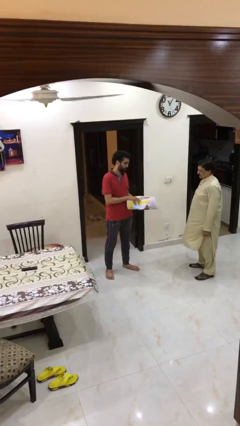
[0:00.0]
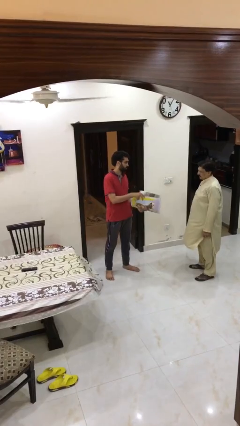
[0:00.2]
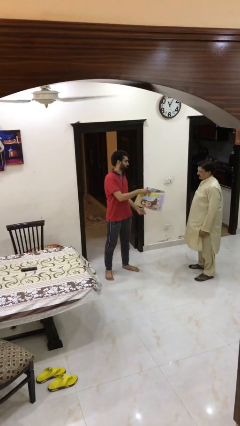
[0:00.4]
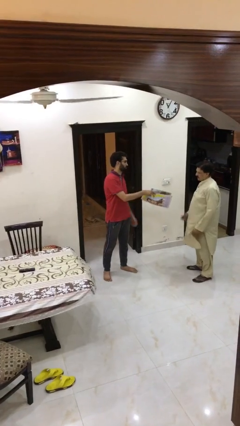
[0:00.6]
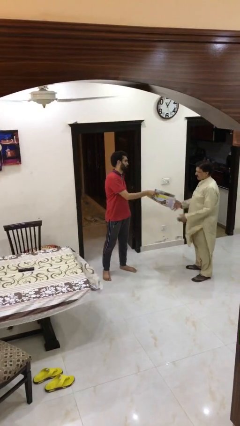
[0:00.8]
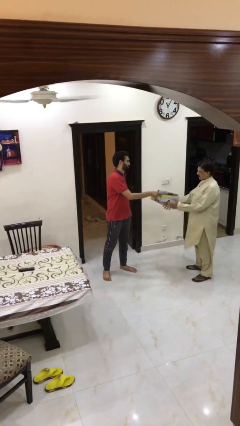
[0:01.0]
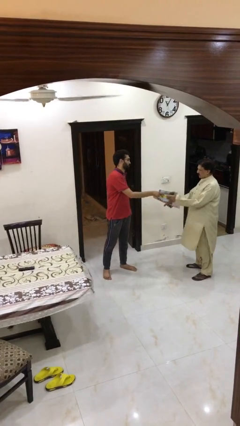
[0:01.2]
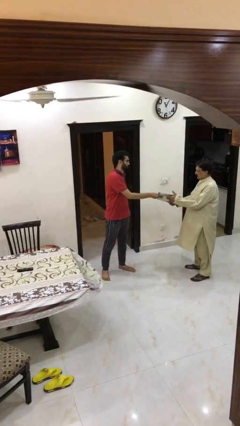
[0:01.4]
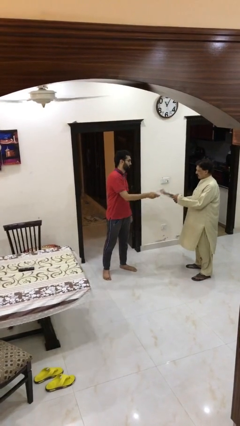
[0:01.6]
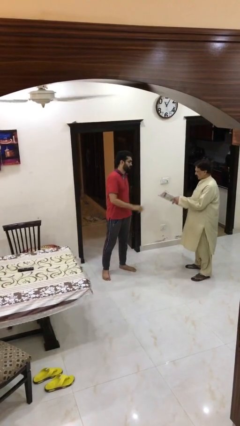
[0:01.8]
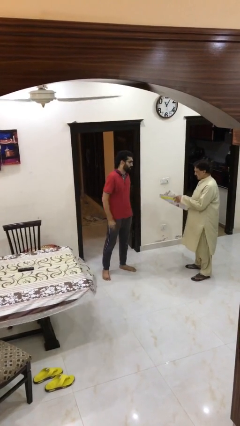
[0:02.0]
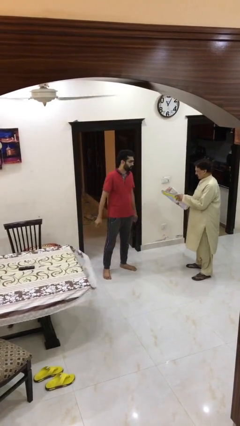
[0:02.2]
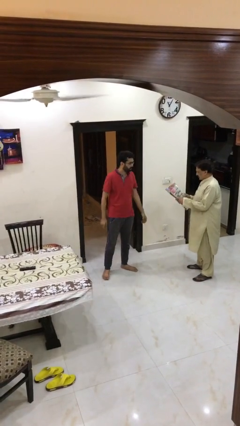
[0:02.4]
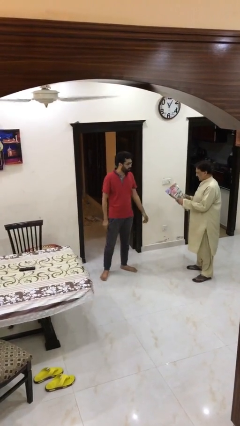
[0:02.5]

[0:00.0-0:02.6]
person transfers object to person

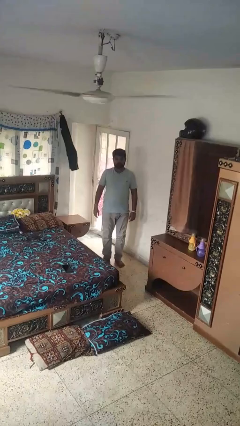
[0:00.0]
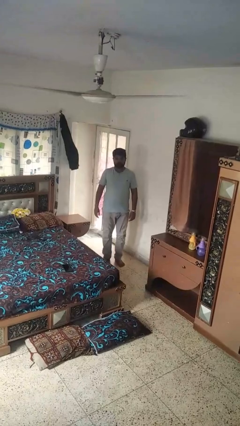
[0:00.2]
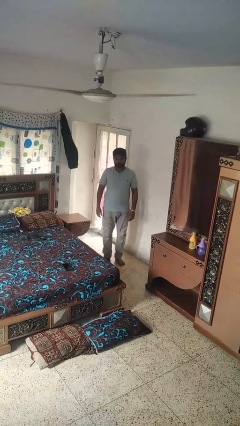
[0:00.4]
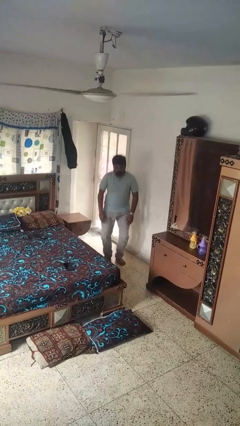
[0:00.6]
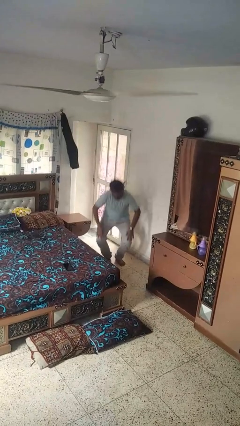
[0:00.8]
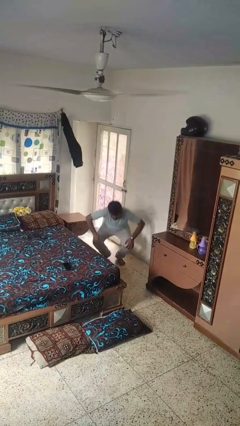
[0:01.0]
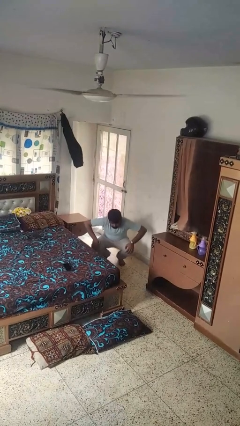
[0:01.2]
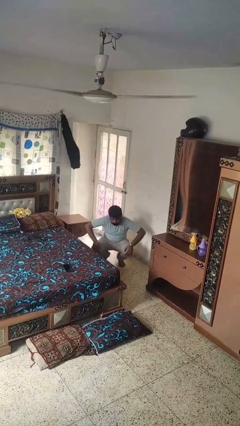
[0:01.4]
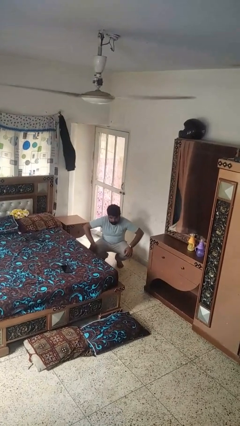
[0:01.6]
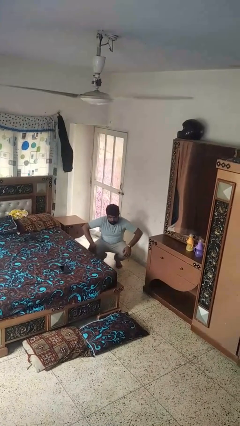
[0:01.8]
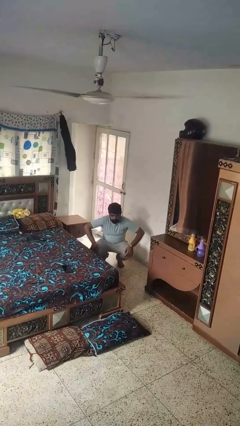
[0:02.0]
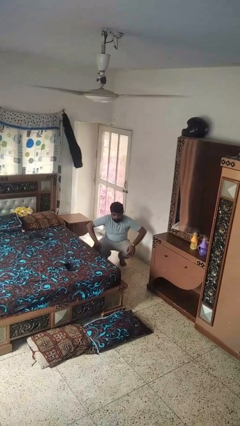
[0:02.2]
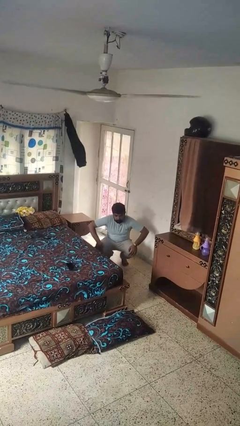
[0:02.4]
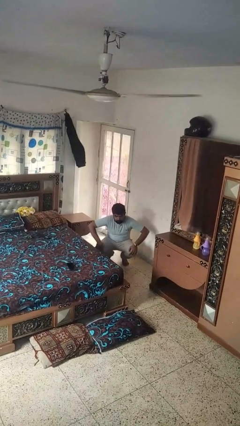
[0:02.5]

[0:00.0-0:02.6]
person squats

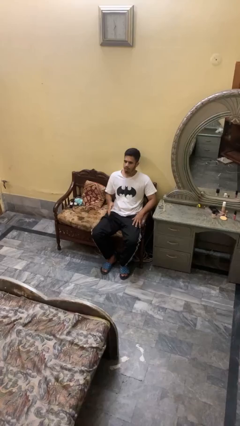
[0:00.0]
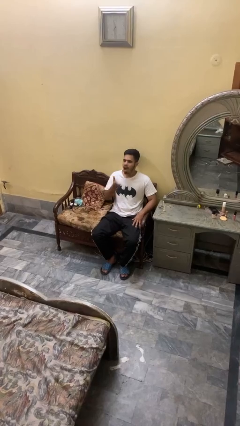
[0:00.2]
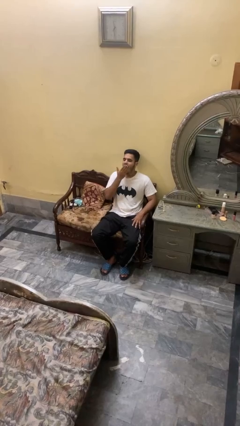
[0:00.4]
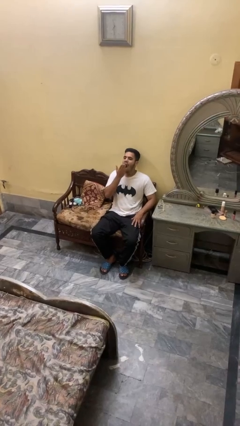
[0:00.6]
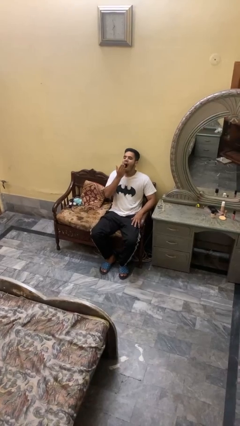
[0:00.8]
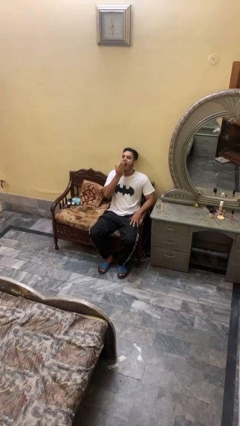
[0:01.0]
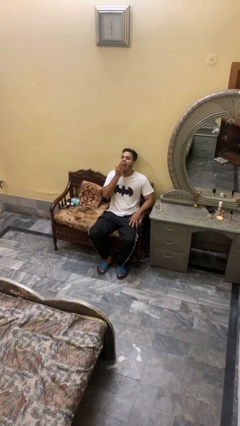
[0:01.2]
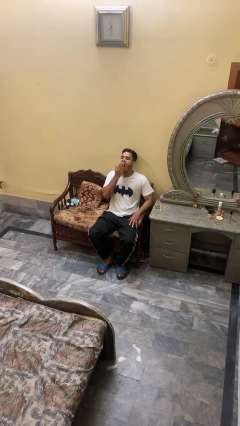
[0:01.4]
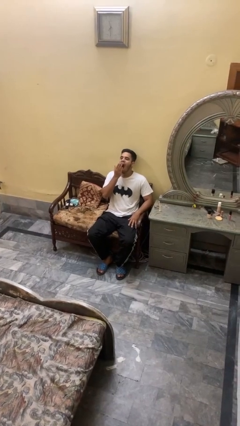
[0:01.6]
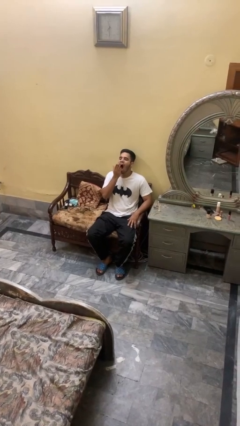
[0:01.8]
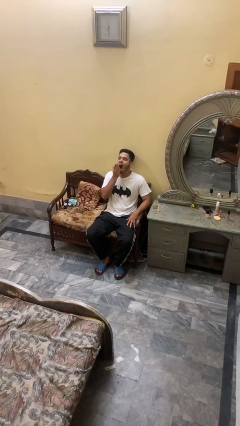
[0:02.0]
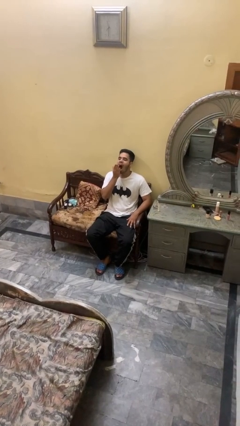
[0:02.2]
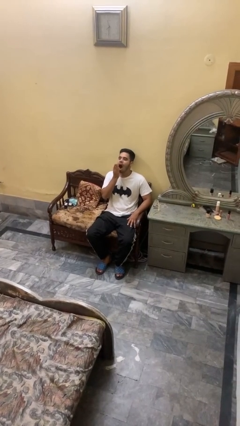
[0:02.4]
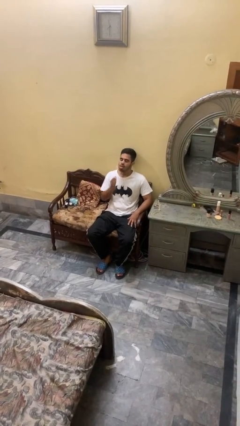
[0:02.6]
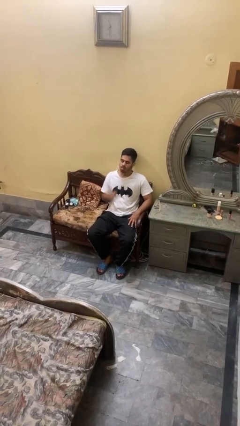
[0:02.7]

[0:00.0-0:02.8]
person yawns

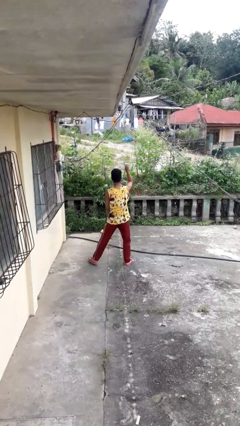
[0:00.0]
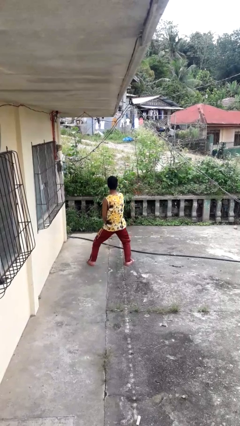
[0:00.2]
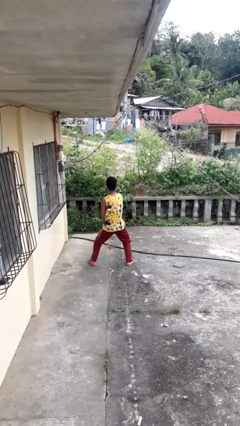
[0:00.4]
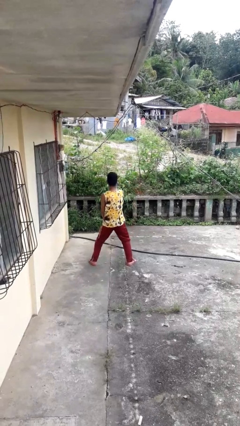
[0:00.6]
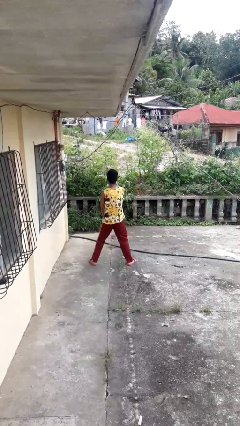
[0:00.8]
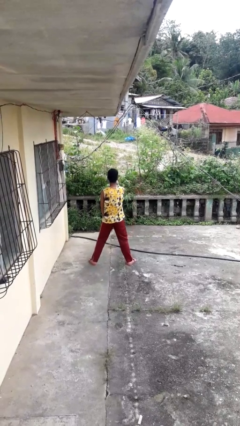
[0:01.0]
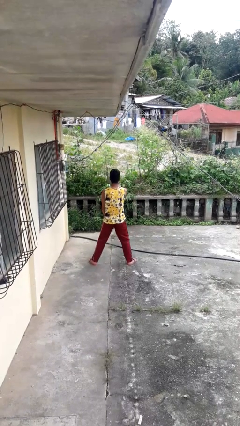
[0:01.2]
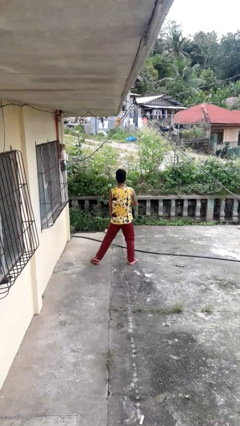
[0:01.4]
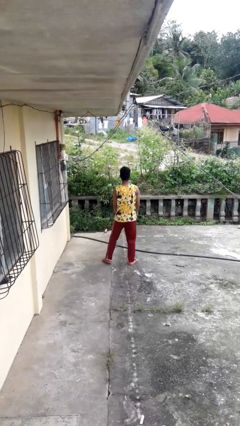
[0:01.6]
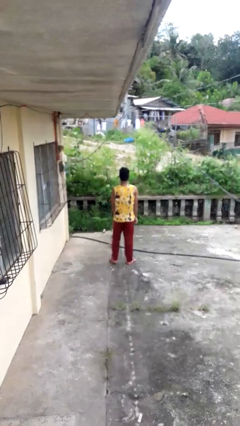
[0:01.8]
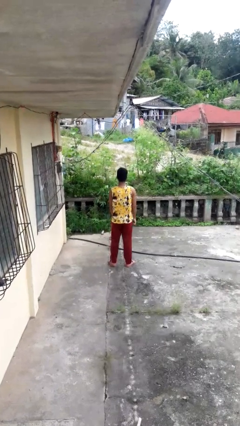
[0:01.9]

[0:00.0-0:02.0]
person karate chop

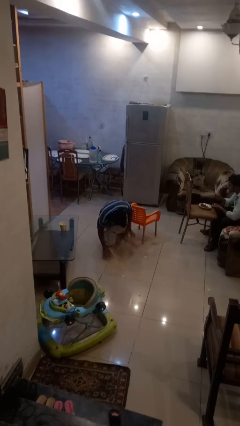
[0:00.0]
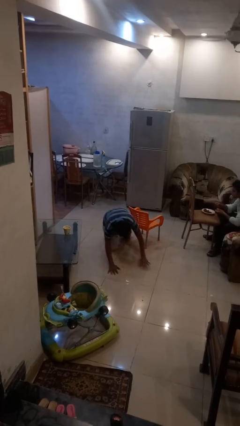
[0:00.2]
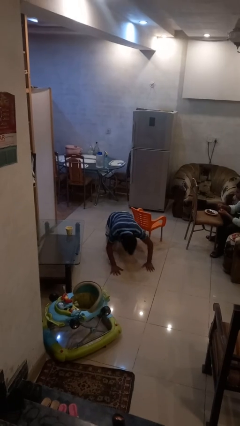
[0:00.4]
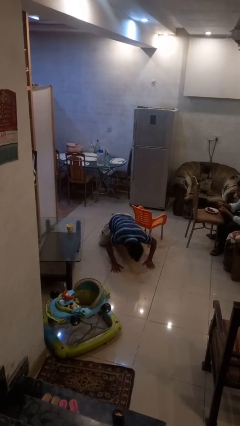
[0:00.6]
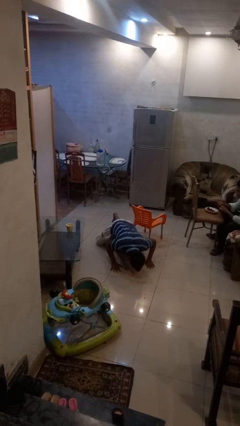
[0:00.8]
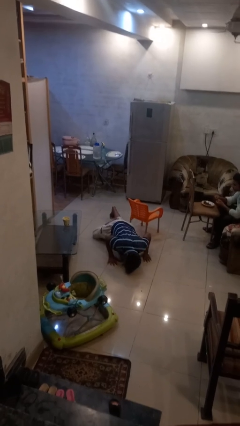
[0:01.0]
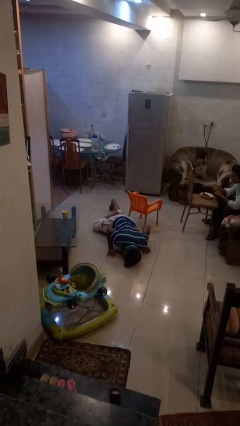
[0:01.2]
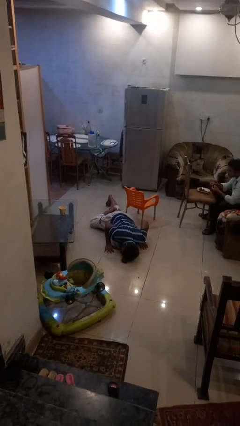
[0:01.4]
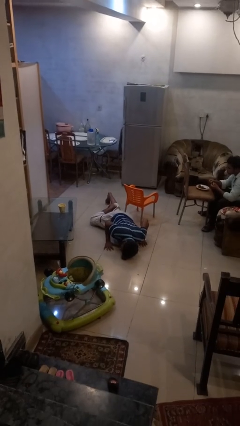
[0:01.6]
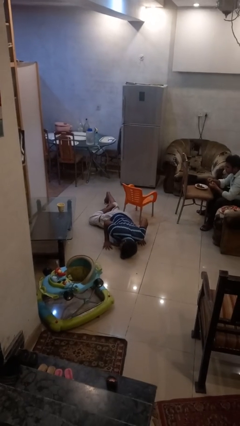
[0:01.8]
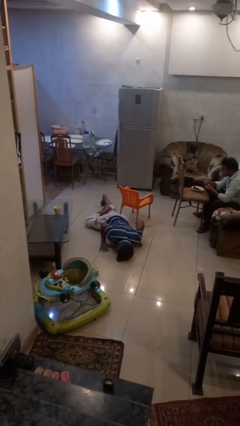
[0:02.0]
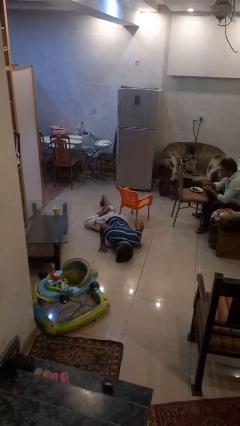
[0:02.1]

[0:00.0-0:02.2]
person lies down on floor

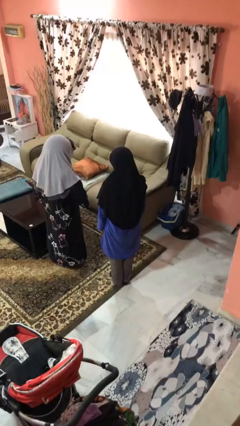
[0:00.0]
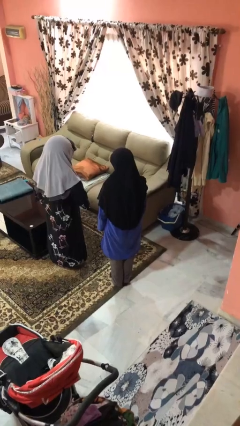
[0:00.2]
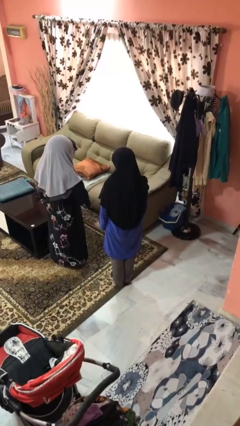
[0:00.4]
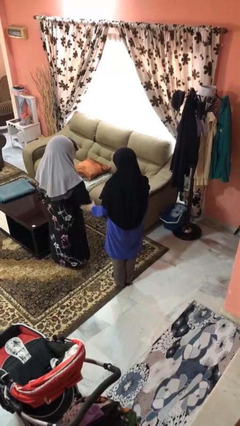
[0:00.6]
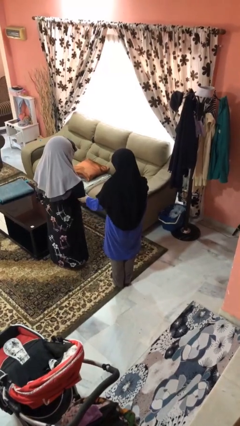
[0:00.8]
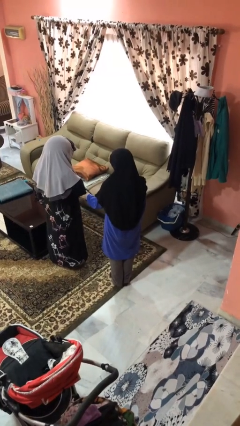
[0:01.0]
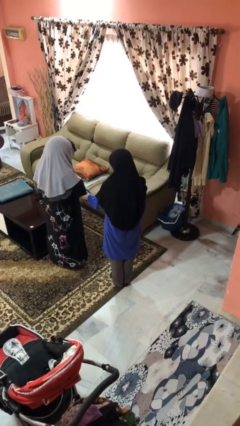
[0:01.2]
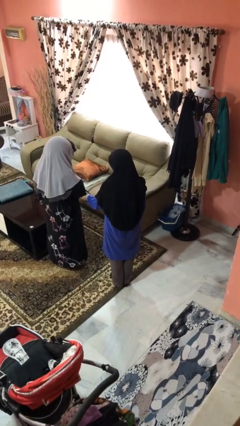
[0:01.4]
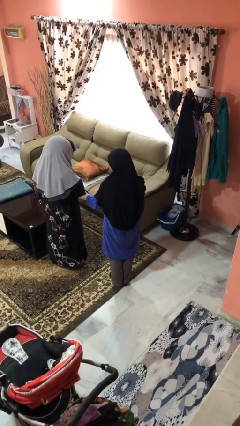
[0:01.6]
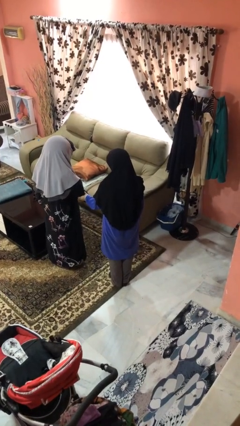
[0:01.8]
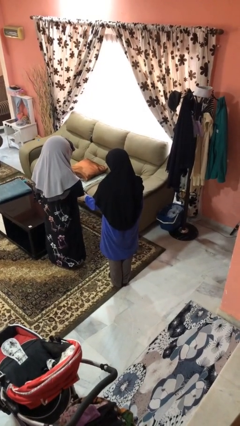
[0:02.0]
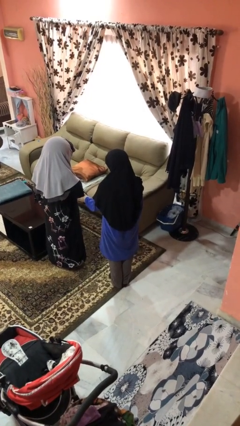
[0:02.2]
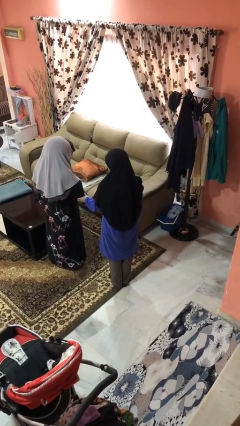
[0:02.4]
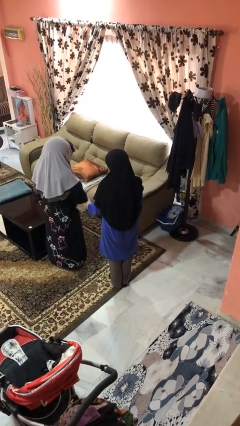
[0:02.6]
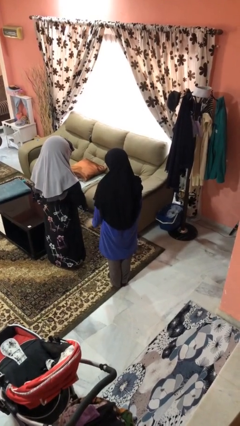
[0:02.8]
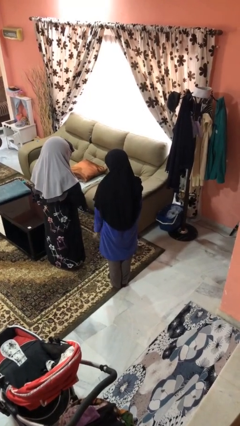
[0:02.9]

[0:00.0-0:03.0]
person grabs person by forearm

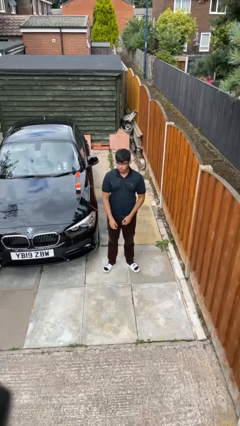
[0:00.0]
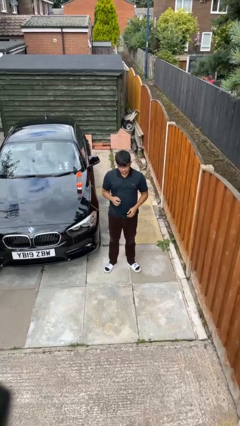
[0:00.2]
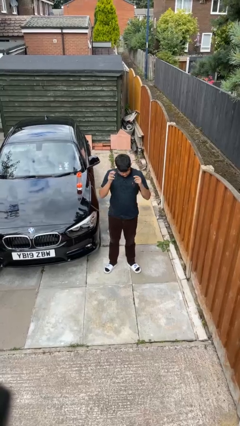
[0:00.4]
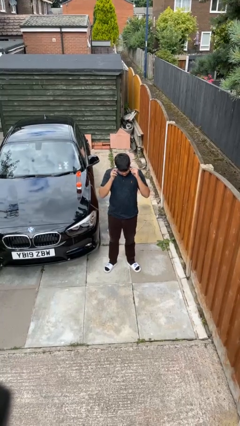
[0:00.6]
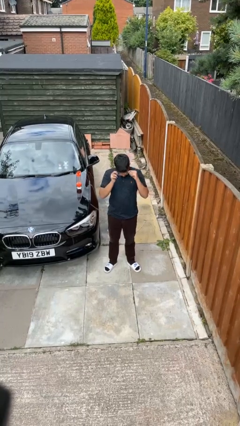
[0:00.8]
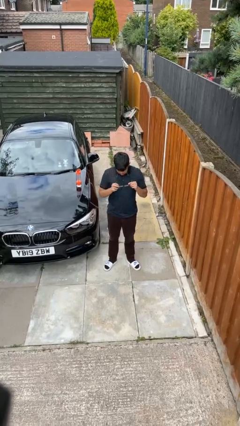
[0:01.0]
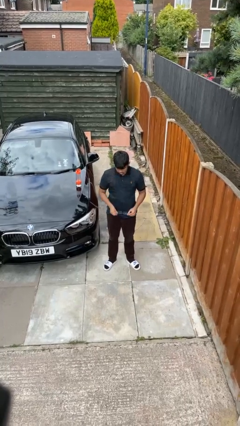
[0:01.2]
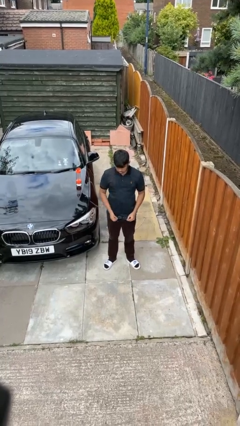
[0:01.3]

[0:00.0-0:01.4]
person takes off glasses

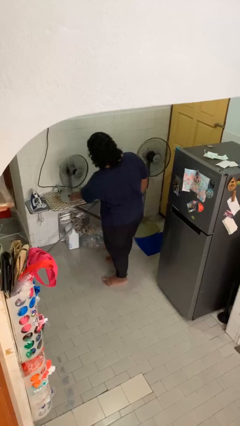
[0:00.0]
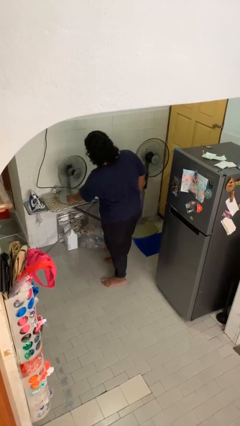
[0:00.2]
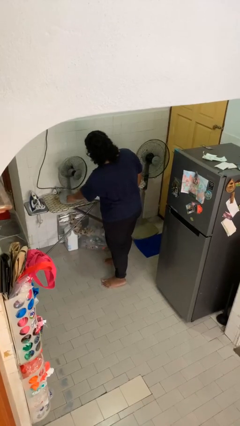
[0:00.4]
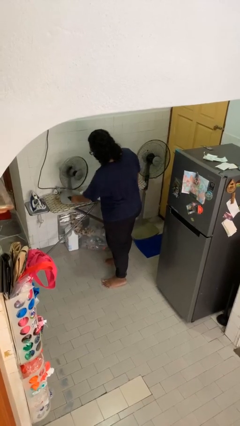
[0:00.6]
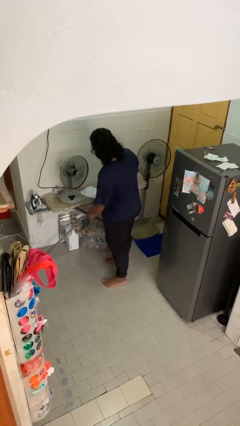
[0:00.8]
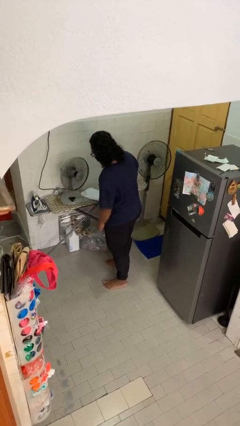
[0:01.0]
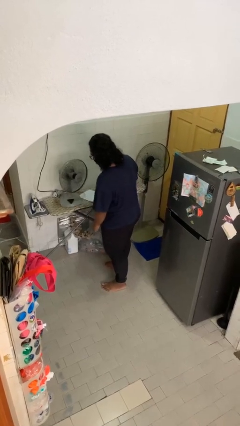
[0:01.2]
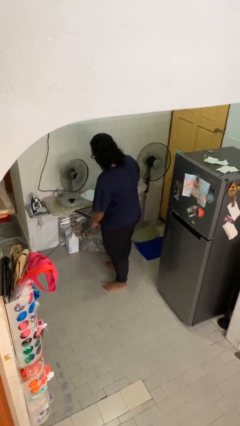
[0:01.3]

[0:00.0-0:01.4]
person turns on fan
